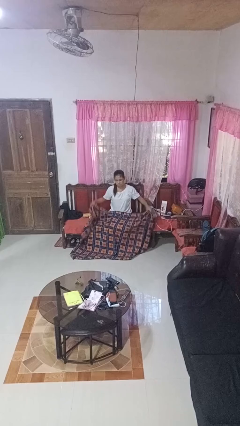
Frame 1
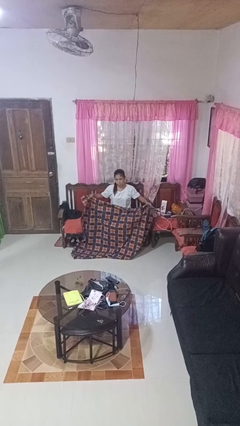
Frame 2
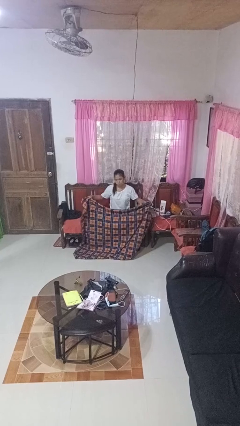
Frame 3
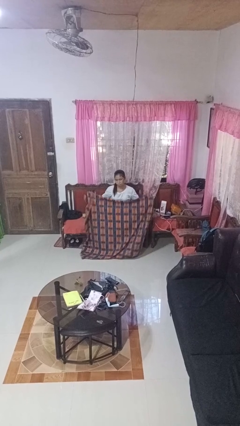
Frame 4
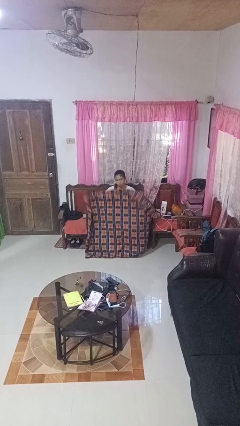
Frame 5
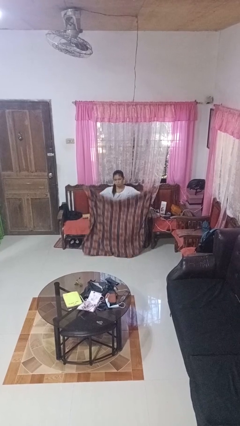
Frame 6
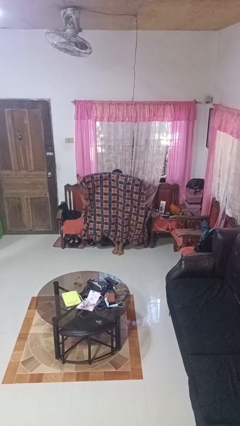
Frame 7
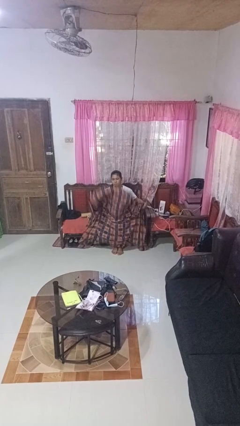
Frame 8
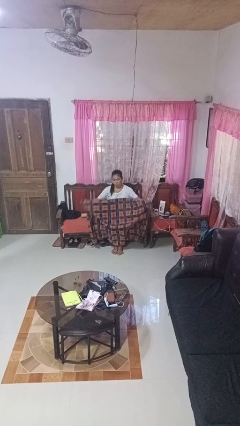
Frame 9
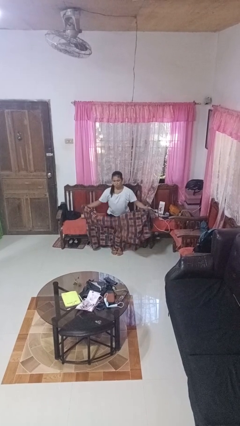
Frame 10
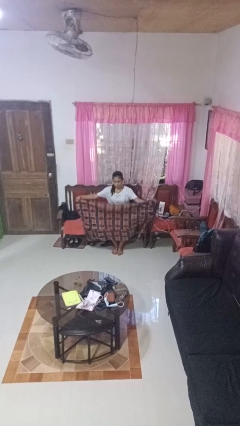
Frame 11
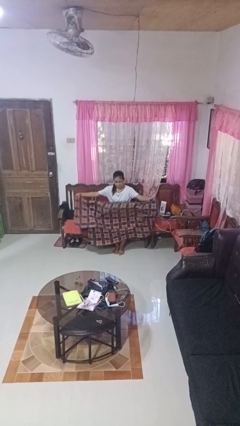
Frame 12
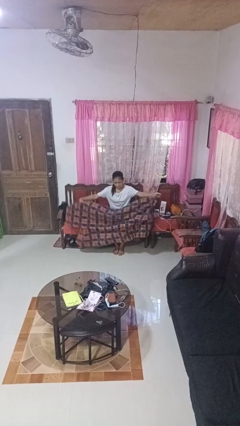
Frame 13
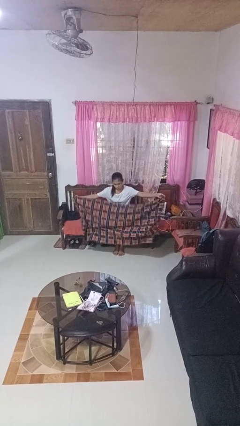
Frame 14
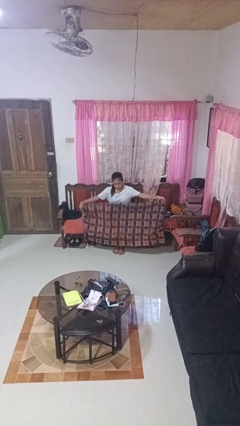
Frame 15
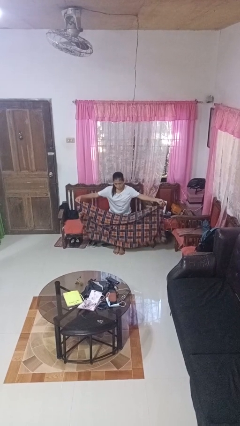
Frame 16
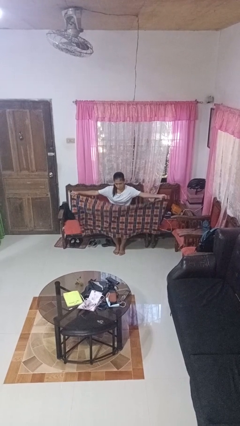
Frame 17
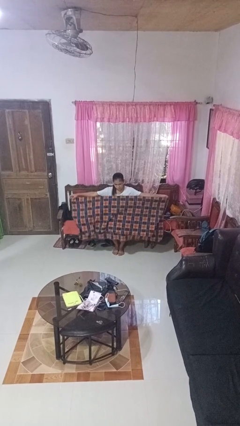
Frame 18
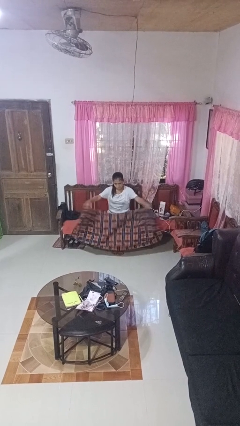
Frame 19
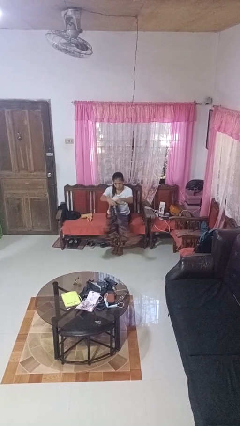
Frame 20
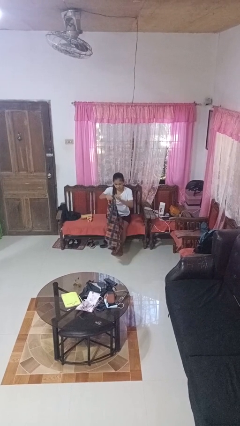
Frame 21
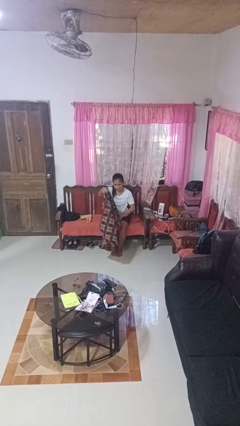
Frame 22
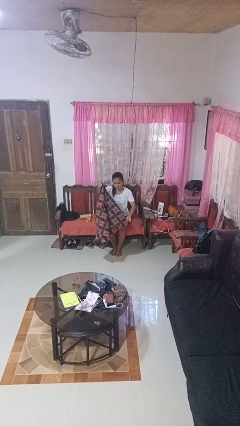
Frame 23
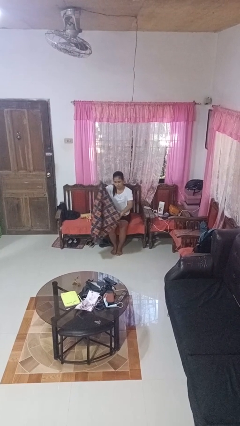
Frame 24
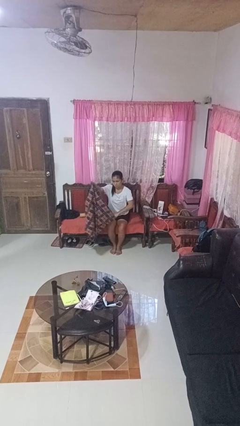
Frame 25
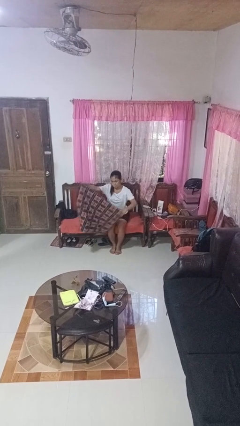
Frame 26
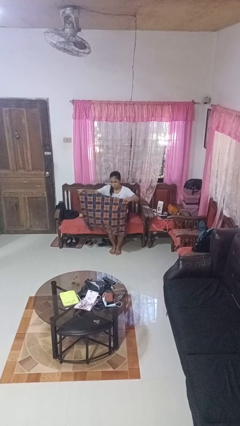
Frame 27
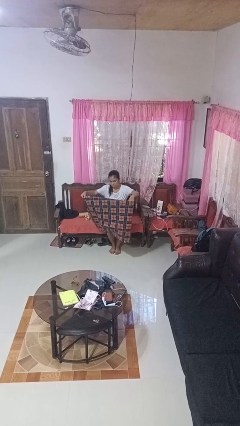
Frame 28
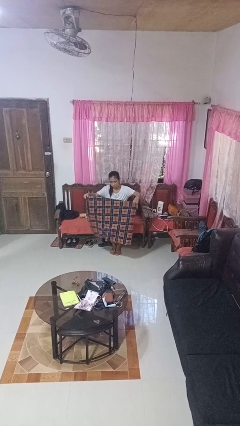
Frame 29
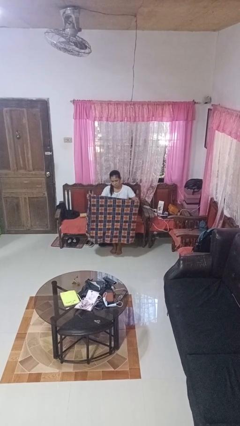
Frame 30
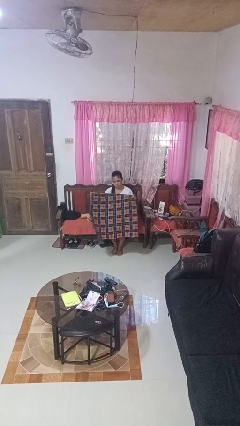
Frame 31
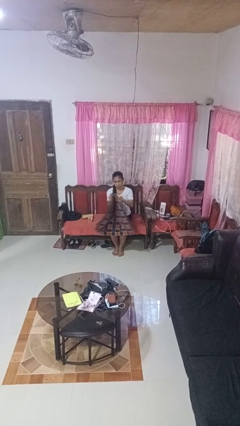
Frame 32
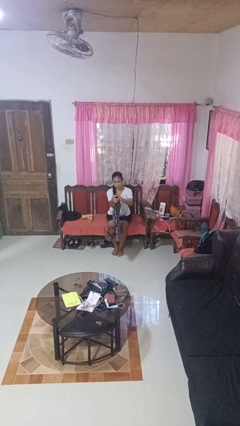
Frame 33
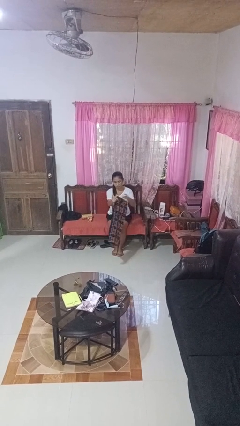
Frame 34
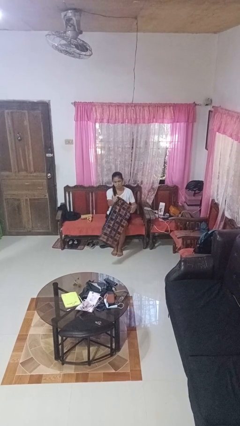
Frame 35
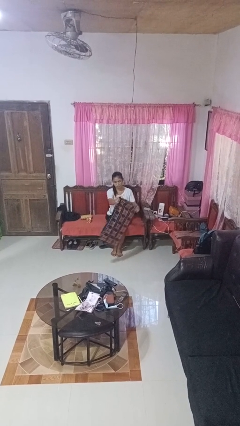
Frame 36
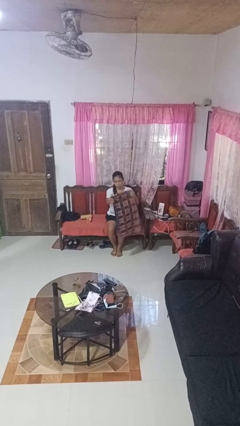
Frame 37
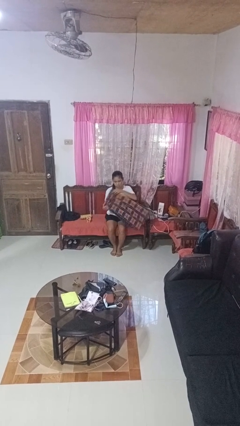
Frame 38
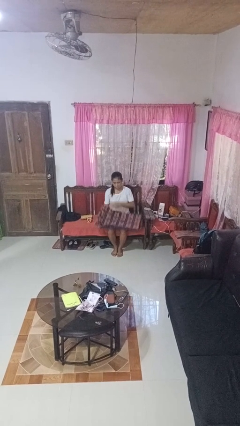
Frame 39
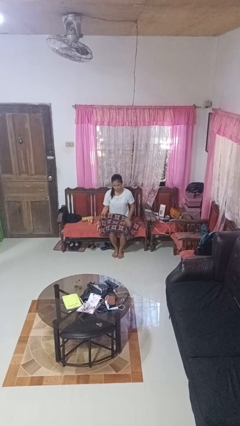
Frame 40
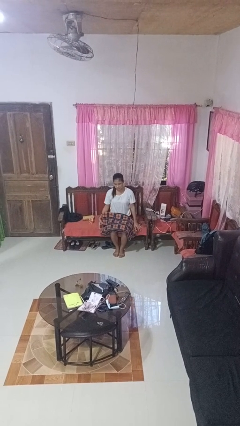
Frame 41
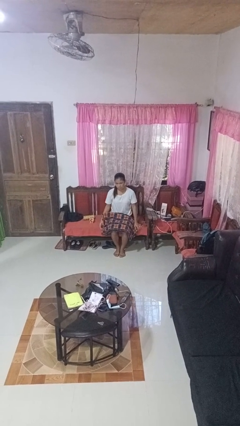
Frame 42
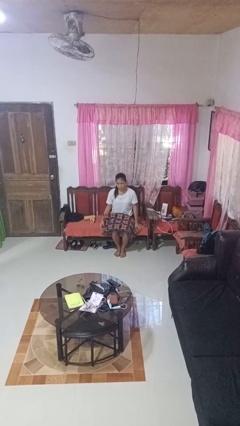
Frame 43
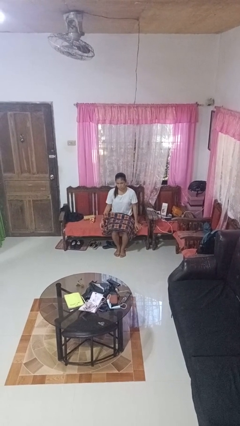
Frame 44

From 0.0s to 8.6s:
person folds blanket

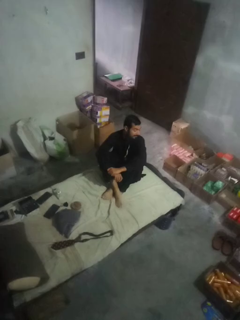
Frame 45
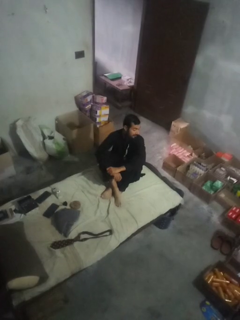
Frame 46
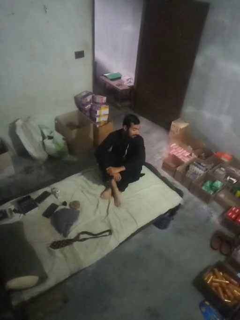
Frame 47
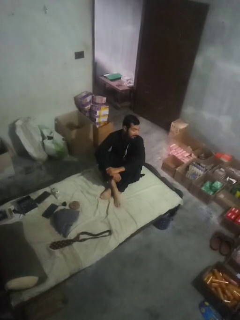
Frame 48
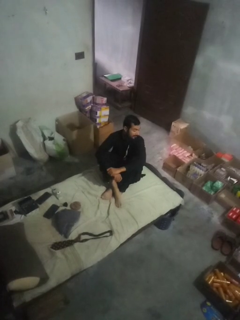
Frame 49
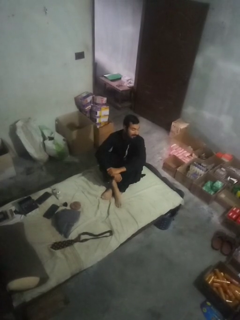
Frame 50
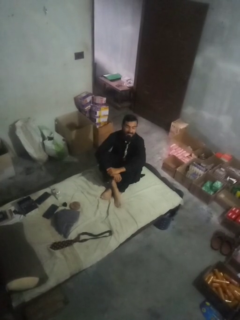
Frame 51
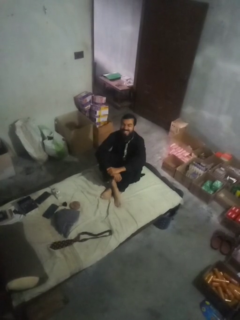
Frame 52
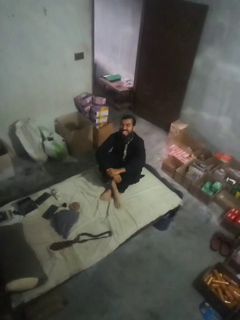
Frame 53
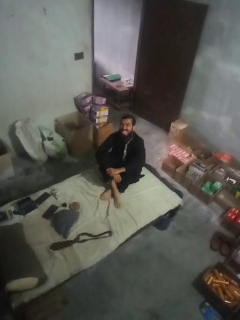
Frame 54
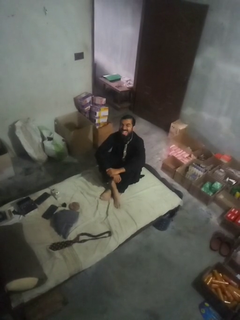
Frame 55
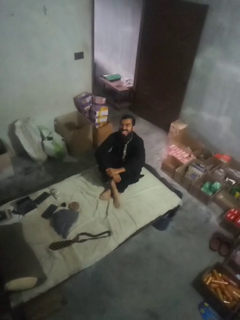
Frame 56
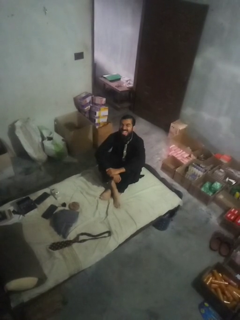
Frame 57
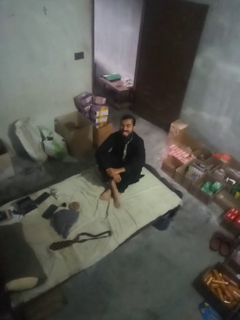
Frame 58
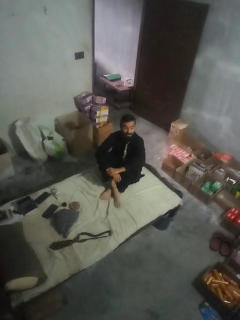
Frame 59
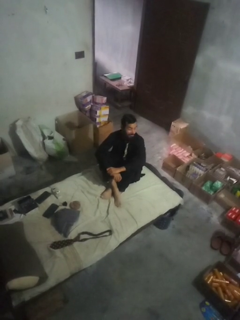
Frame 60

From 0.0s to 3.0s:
person sticks out tongue

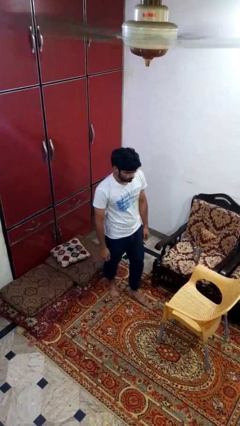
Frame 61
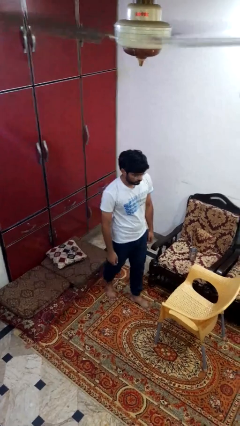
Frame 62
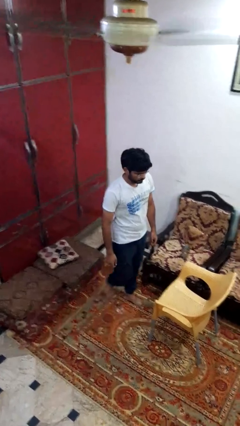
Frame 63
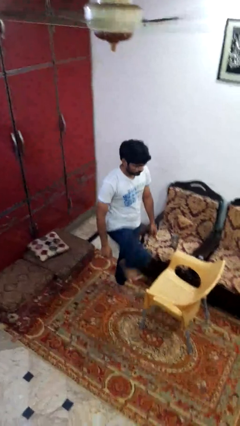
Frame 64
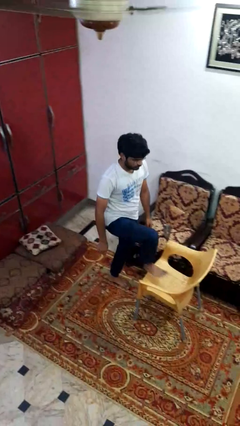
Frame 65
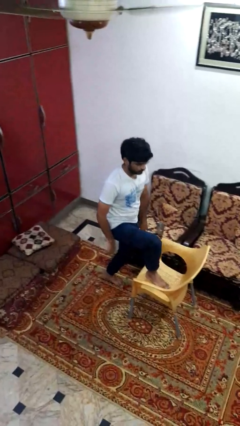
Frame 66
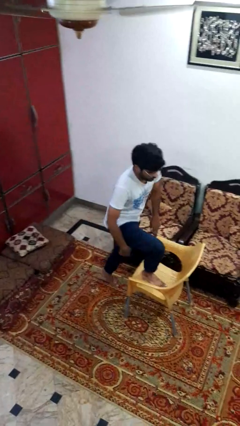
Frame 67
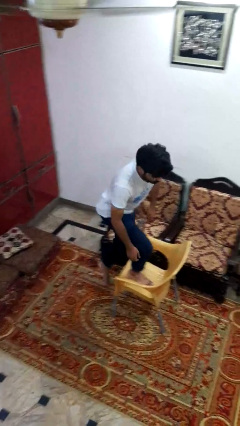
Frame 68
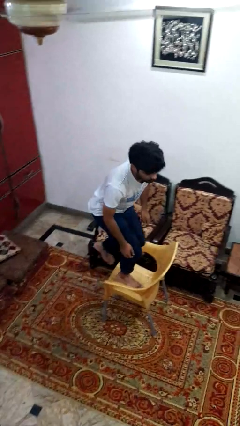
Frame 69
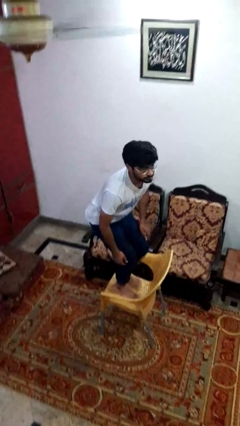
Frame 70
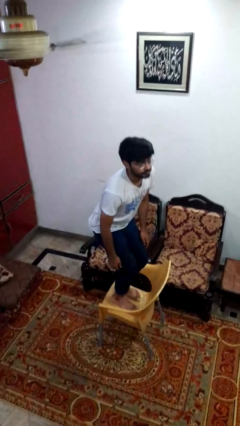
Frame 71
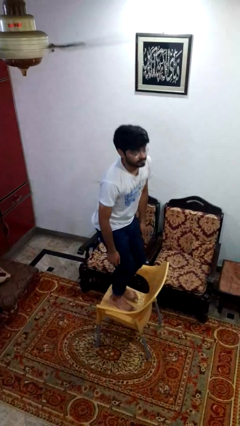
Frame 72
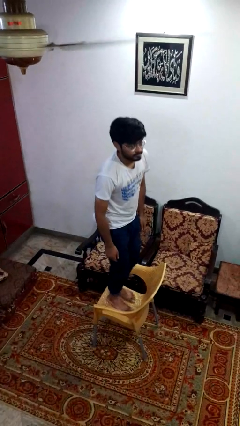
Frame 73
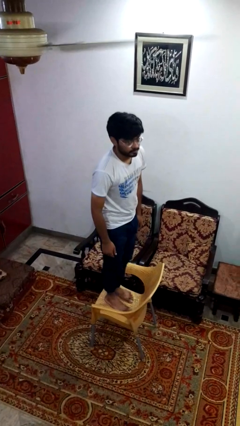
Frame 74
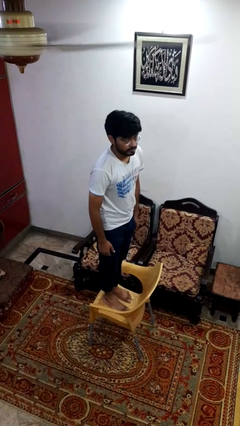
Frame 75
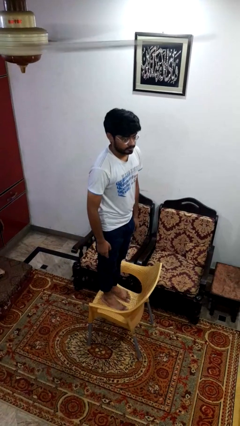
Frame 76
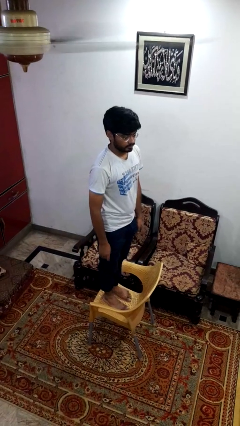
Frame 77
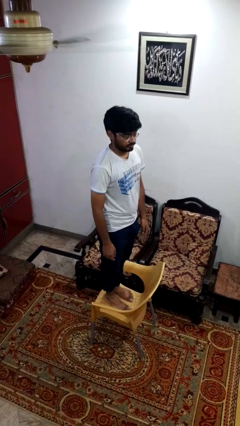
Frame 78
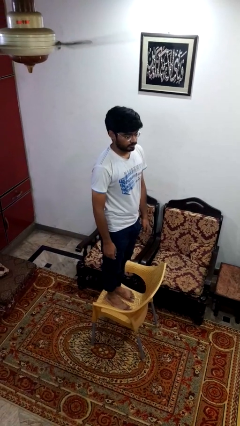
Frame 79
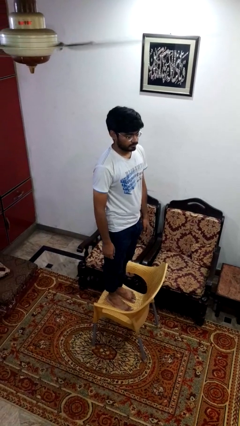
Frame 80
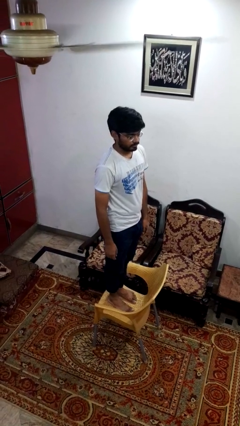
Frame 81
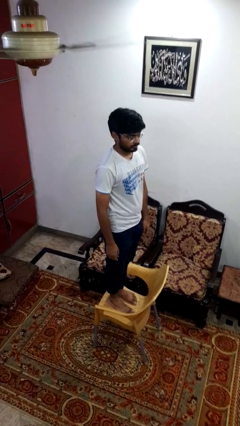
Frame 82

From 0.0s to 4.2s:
person climbs on chair

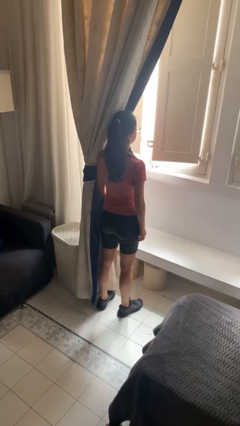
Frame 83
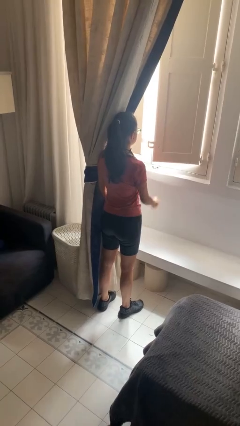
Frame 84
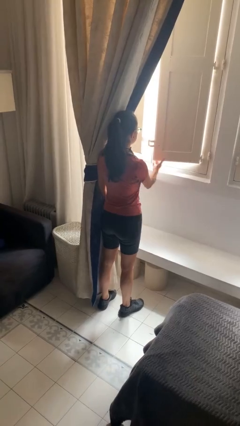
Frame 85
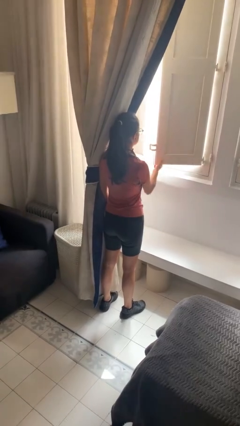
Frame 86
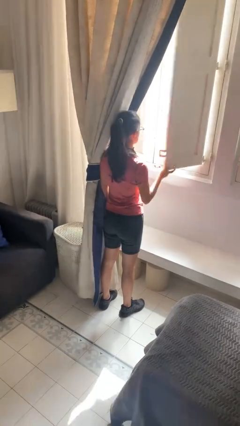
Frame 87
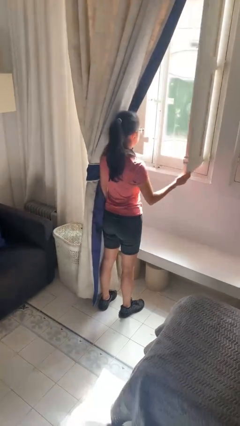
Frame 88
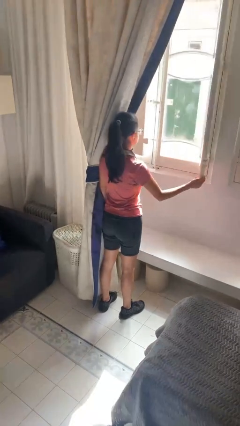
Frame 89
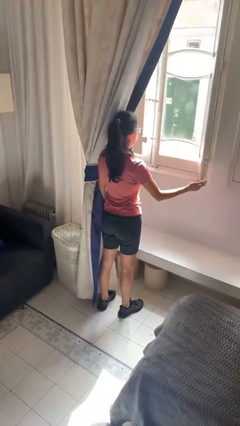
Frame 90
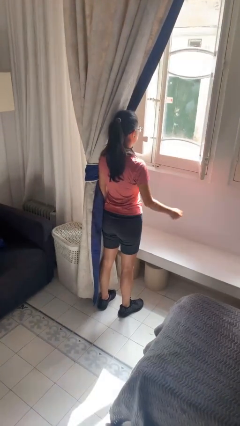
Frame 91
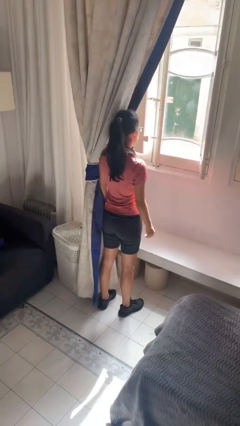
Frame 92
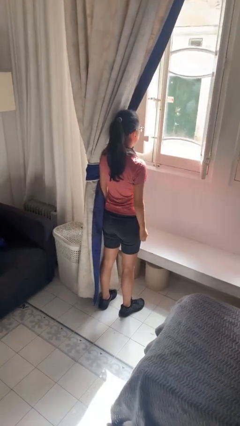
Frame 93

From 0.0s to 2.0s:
person opens home window

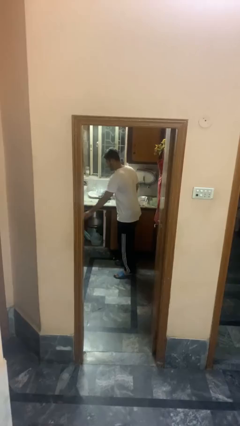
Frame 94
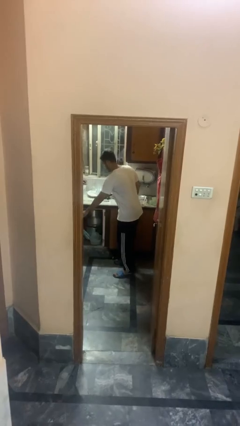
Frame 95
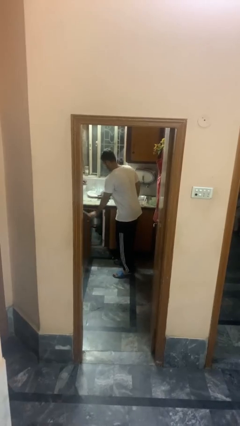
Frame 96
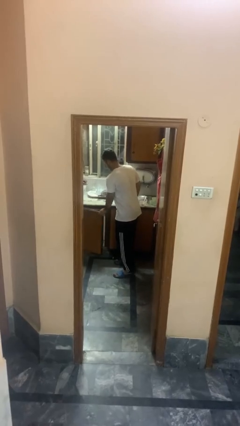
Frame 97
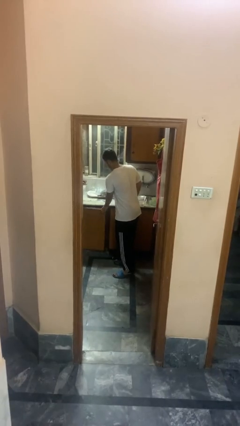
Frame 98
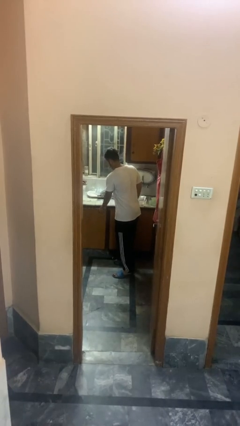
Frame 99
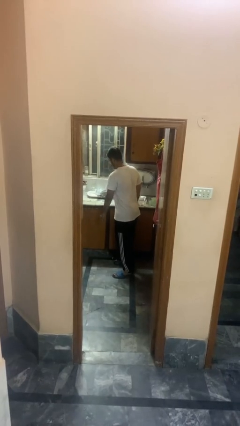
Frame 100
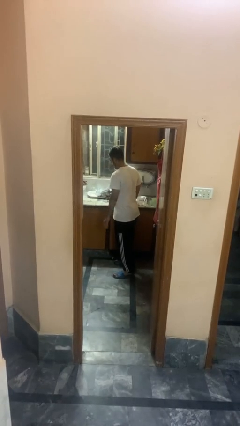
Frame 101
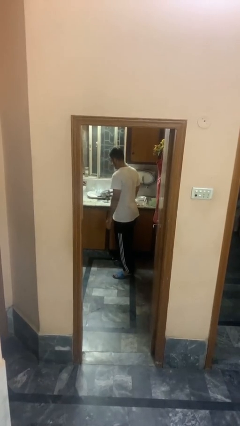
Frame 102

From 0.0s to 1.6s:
person closes cabinet
